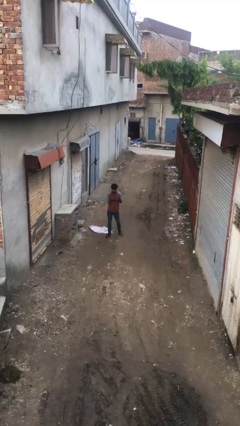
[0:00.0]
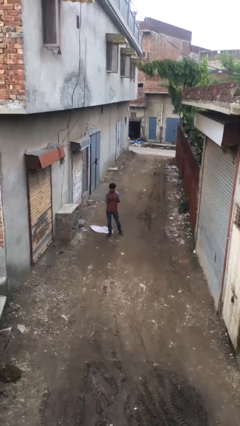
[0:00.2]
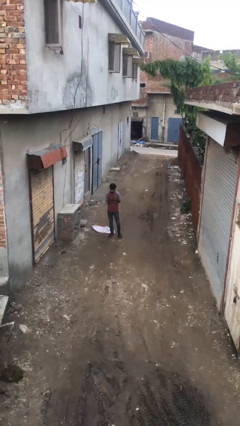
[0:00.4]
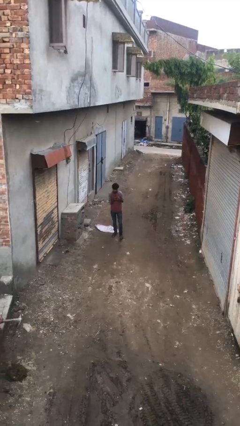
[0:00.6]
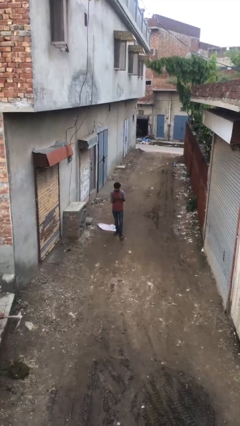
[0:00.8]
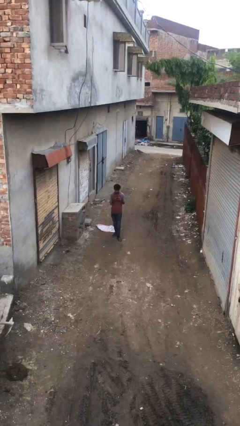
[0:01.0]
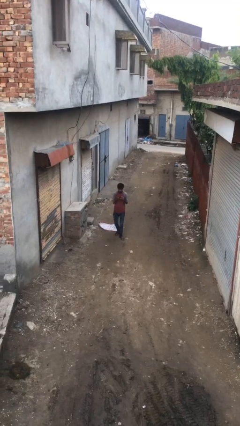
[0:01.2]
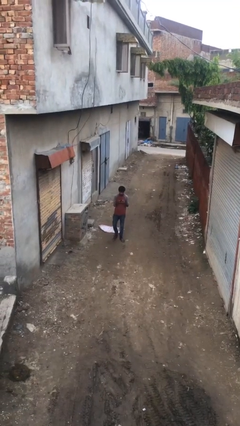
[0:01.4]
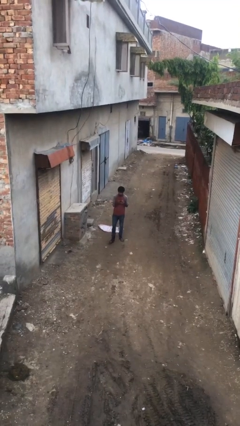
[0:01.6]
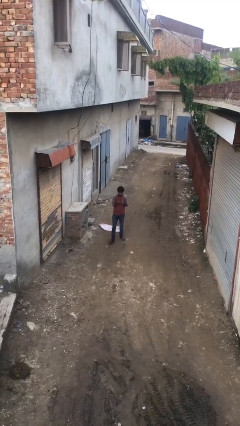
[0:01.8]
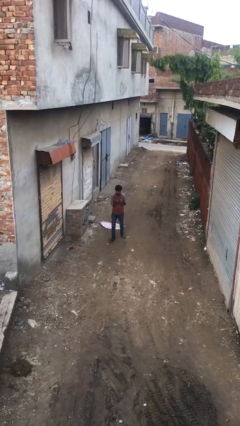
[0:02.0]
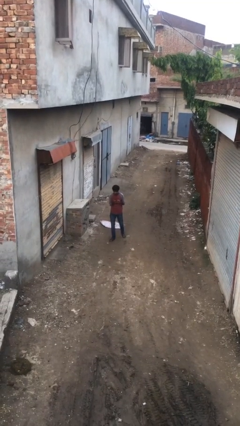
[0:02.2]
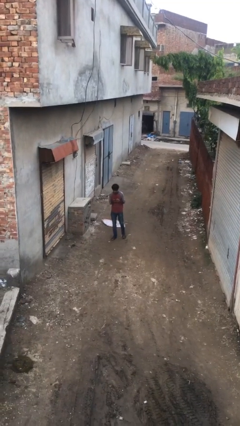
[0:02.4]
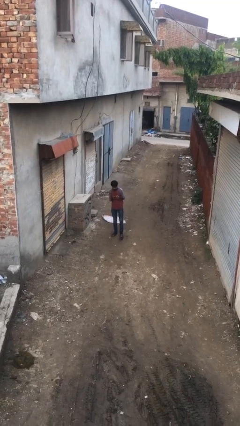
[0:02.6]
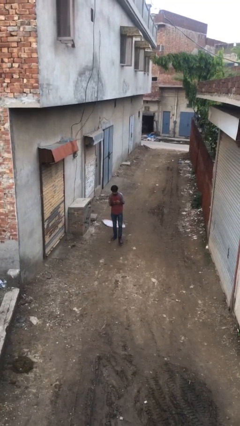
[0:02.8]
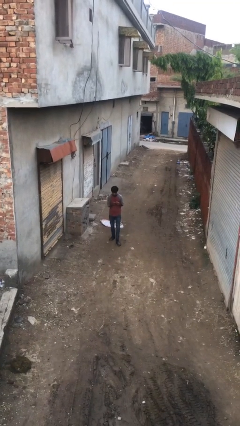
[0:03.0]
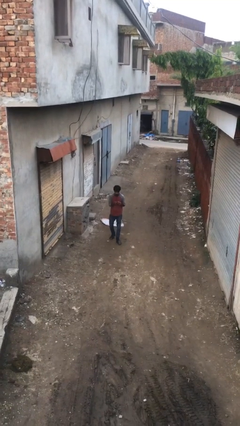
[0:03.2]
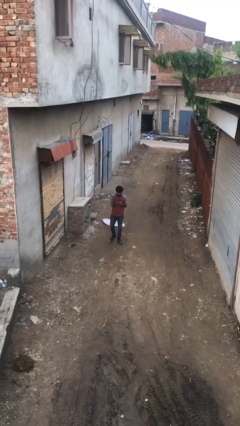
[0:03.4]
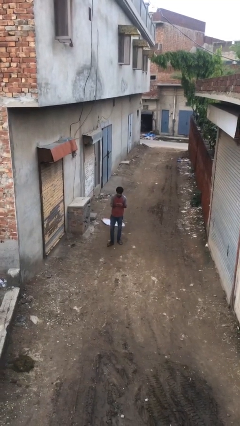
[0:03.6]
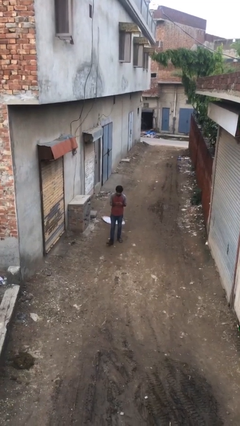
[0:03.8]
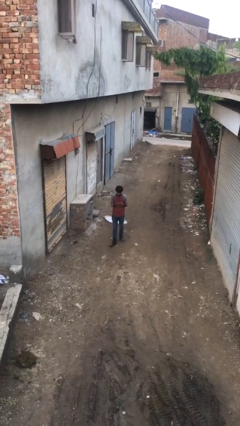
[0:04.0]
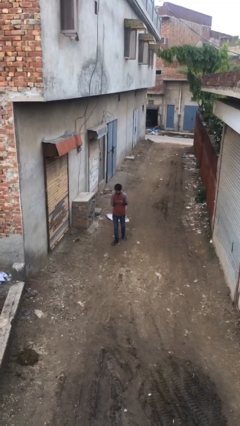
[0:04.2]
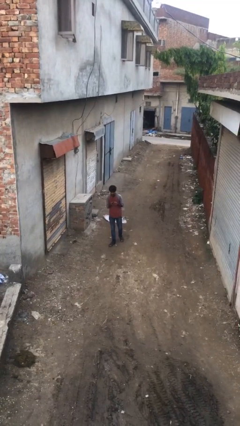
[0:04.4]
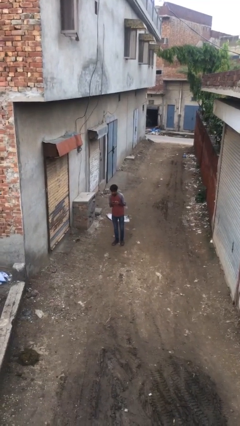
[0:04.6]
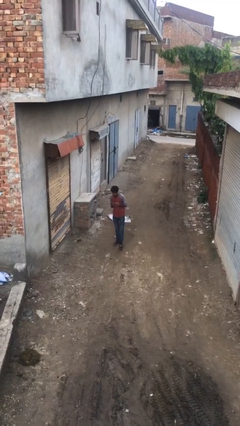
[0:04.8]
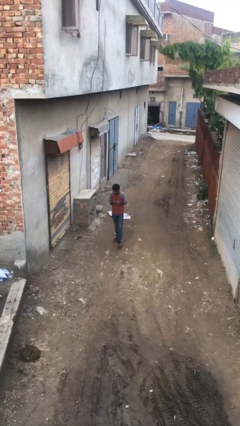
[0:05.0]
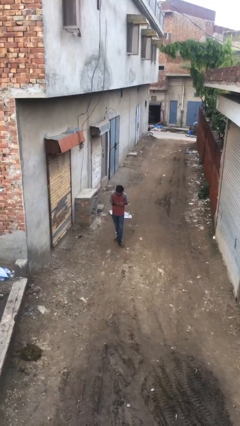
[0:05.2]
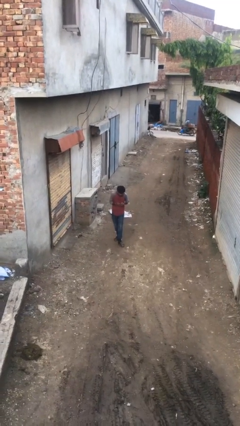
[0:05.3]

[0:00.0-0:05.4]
person texts on phone

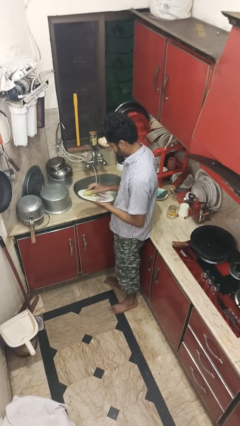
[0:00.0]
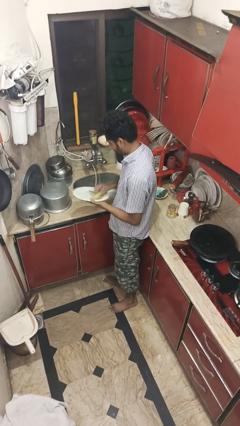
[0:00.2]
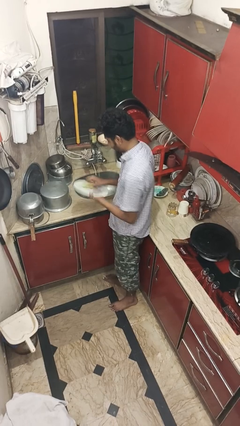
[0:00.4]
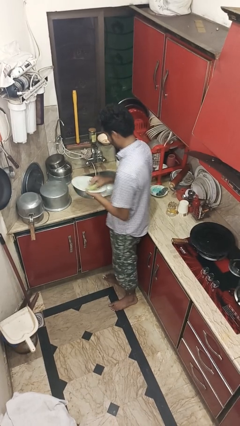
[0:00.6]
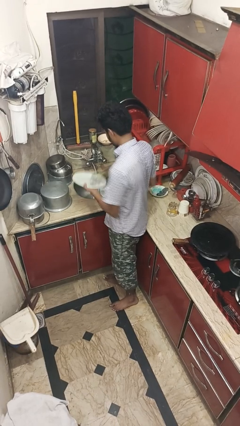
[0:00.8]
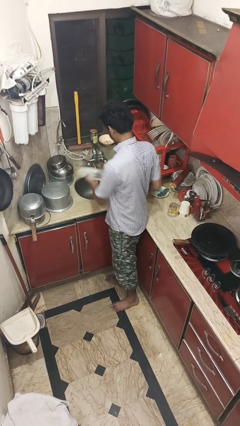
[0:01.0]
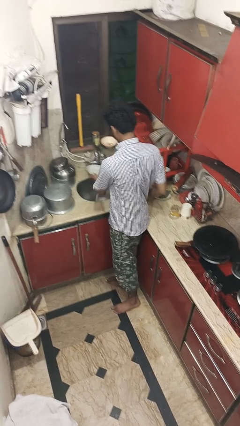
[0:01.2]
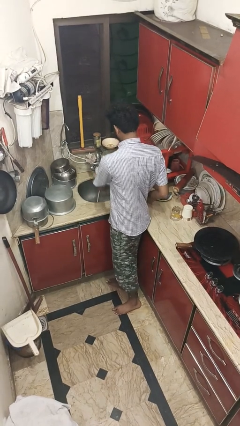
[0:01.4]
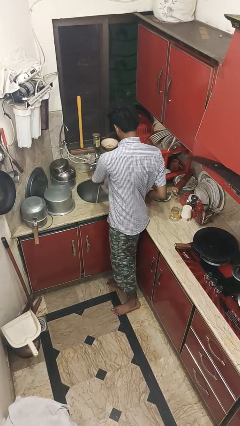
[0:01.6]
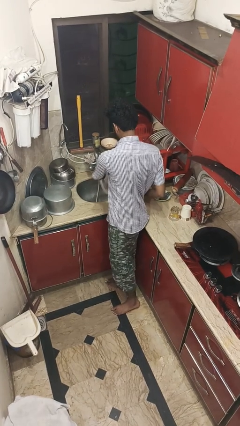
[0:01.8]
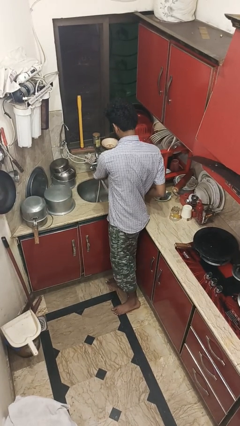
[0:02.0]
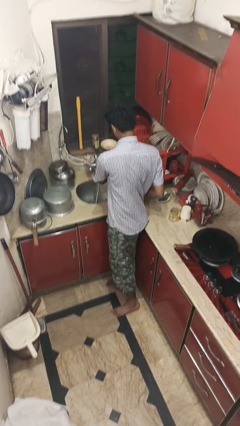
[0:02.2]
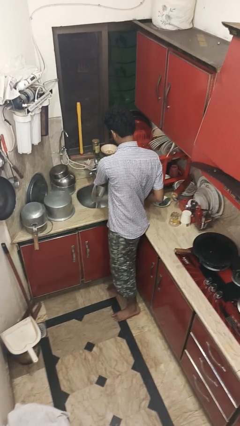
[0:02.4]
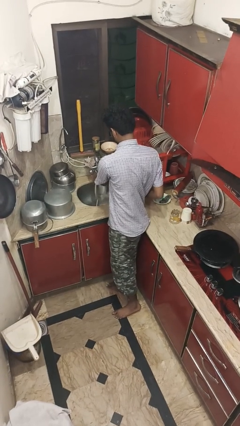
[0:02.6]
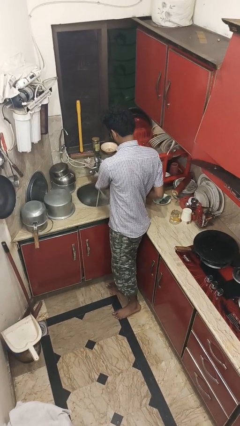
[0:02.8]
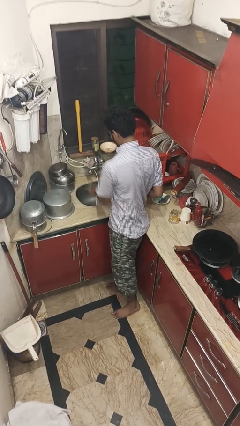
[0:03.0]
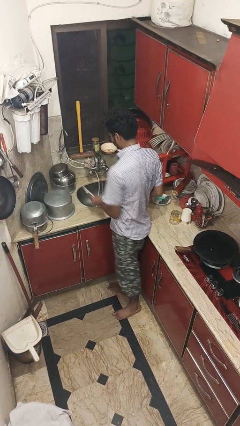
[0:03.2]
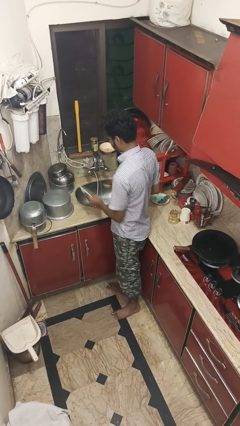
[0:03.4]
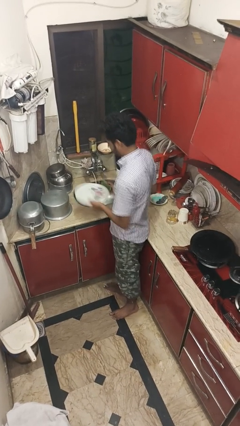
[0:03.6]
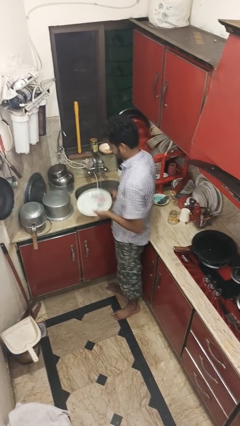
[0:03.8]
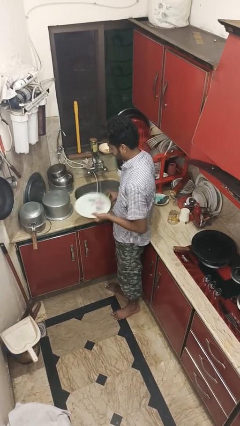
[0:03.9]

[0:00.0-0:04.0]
person washes dish

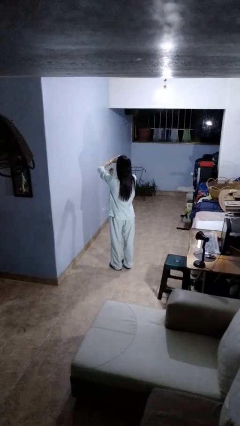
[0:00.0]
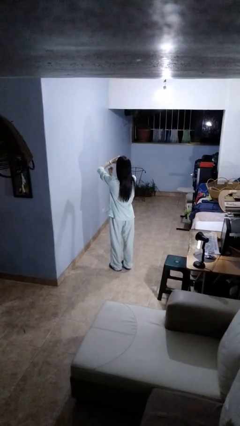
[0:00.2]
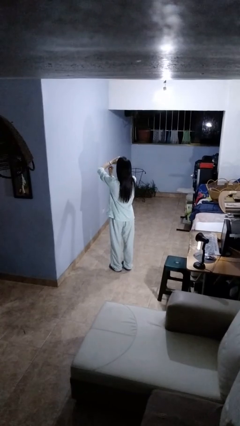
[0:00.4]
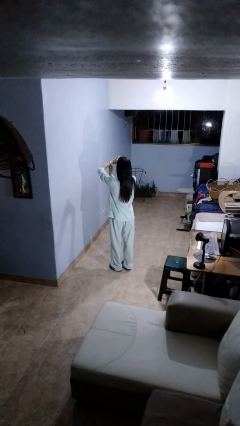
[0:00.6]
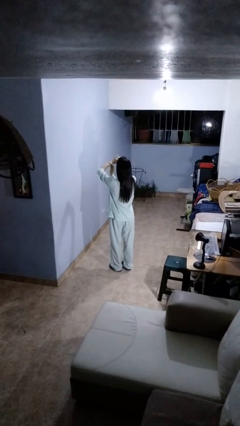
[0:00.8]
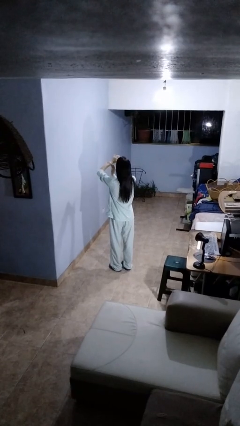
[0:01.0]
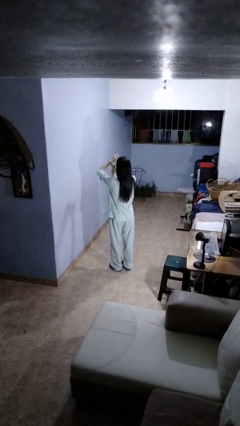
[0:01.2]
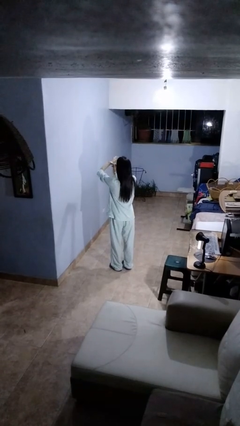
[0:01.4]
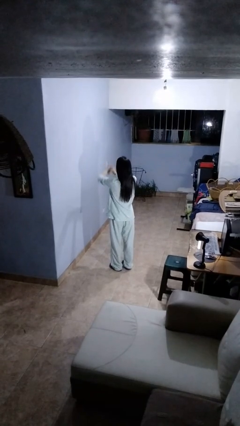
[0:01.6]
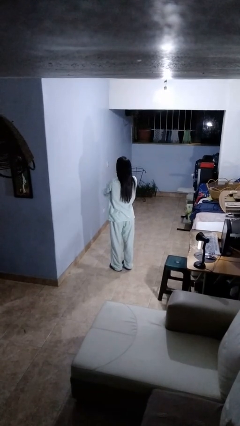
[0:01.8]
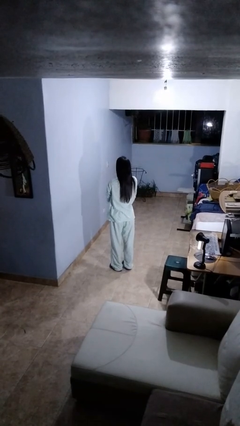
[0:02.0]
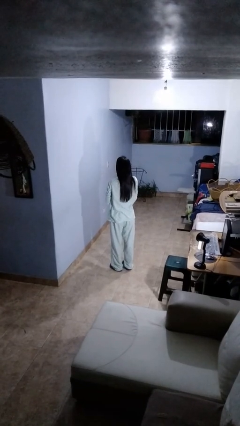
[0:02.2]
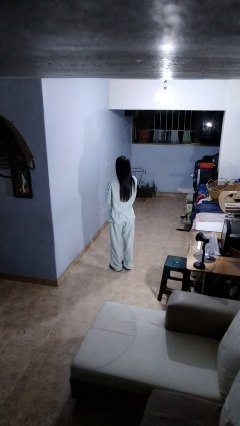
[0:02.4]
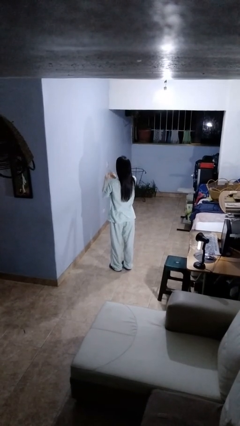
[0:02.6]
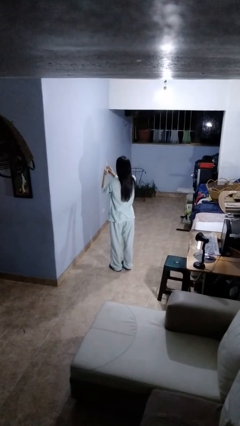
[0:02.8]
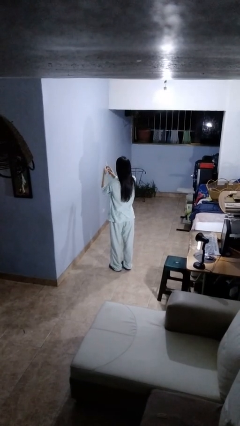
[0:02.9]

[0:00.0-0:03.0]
person takes off wristwatch

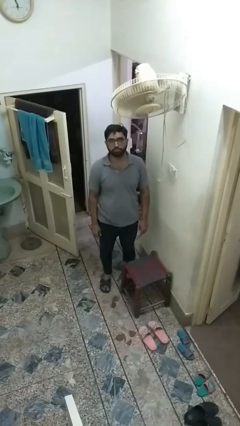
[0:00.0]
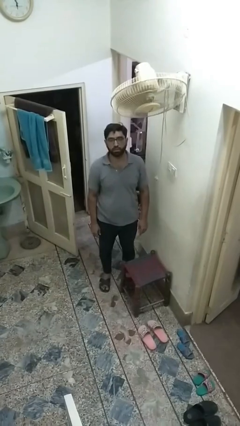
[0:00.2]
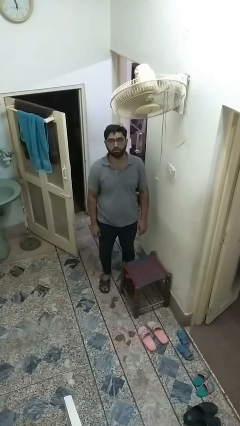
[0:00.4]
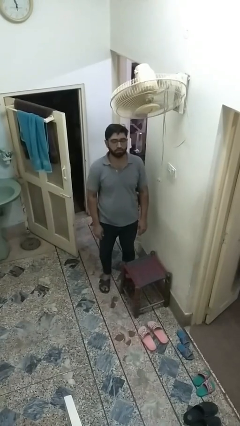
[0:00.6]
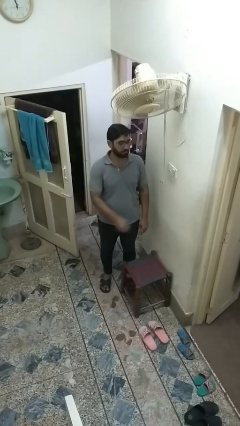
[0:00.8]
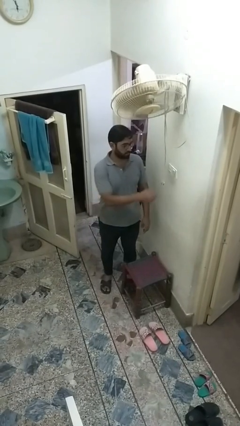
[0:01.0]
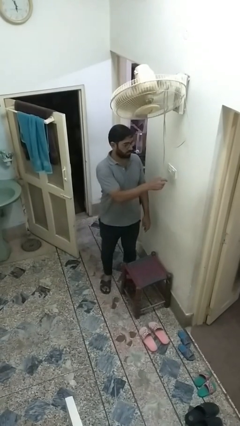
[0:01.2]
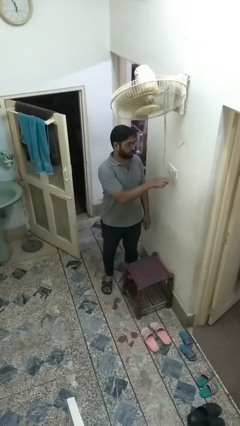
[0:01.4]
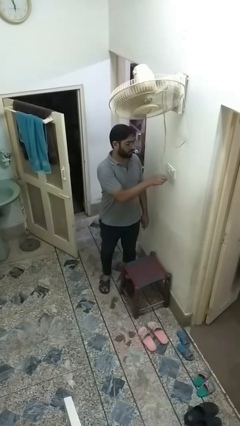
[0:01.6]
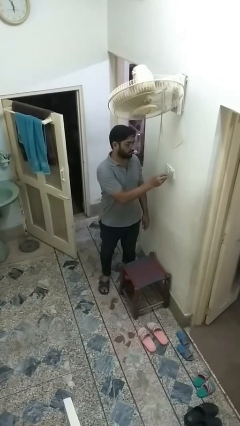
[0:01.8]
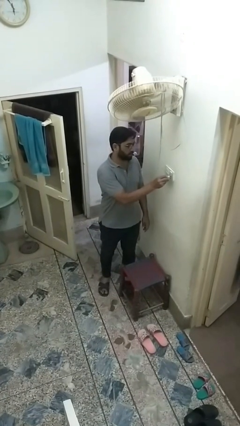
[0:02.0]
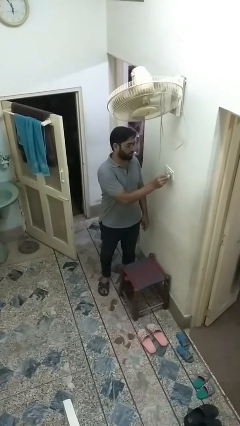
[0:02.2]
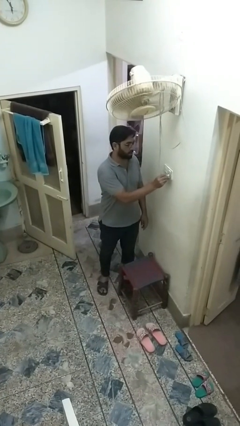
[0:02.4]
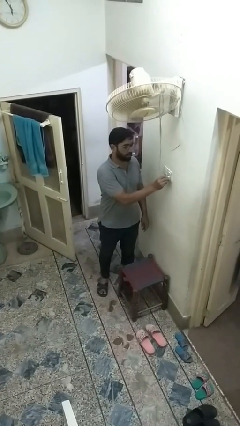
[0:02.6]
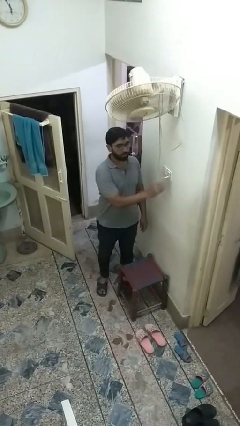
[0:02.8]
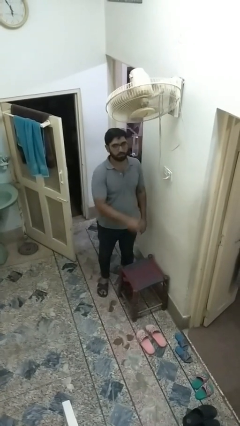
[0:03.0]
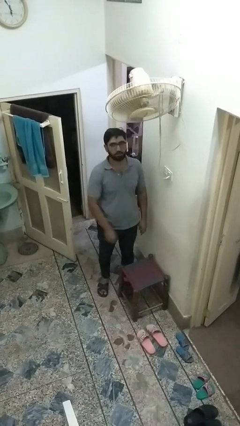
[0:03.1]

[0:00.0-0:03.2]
person plugs into electrical socket

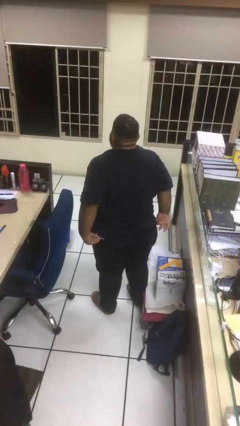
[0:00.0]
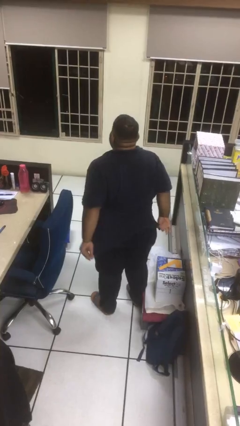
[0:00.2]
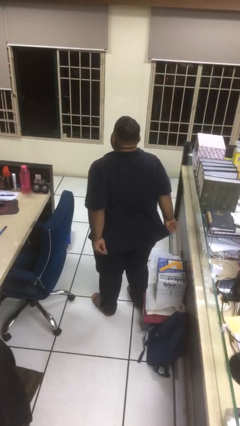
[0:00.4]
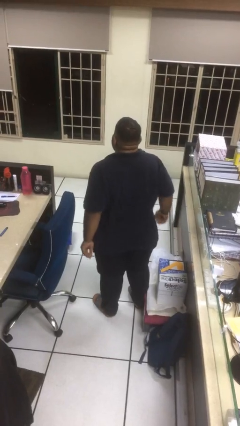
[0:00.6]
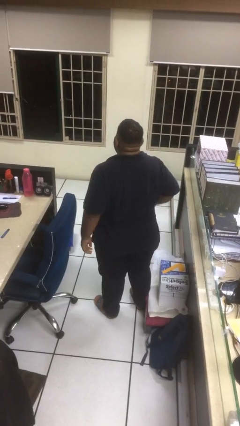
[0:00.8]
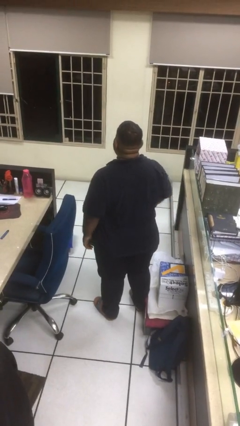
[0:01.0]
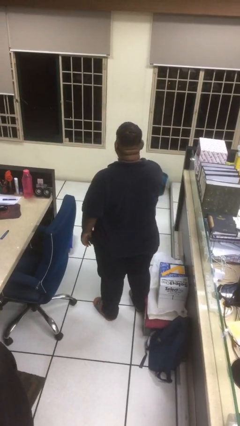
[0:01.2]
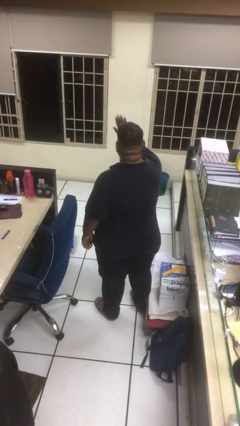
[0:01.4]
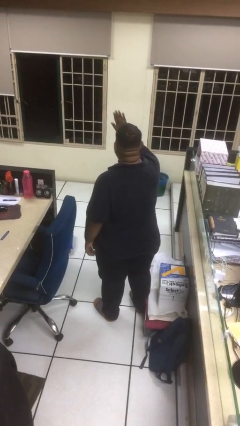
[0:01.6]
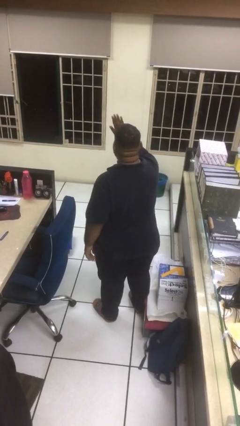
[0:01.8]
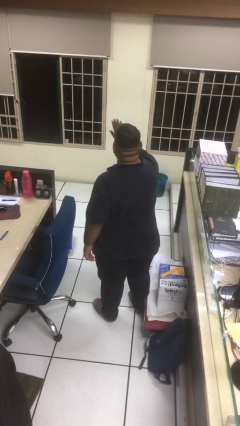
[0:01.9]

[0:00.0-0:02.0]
person gestures stop
